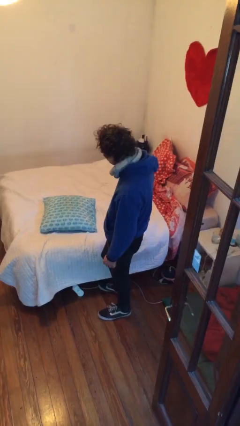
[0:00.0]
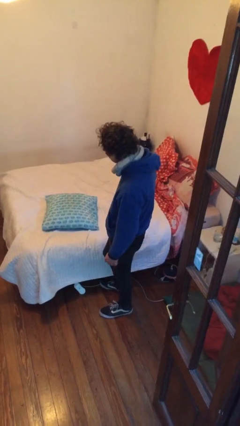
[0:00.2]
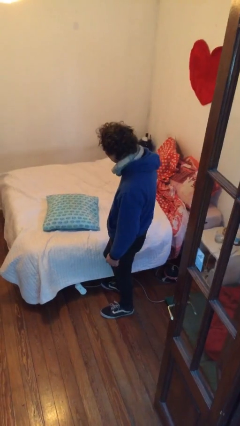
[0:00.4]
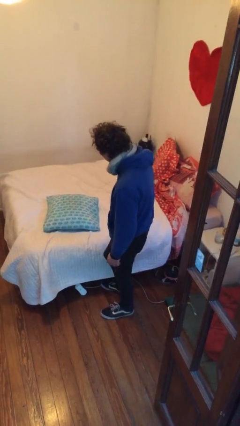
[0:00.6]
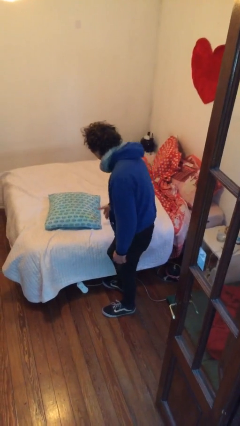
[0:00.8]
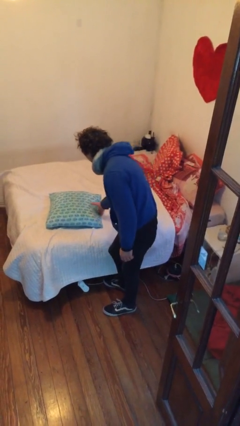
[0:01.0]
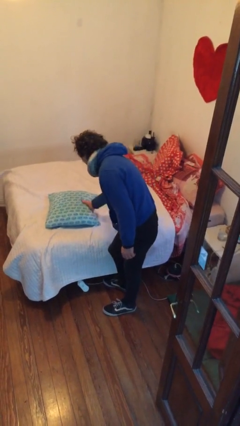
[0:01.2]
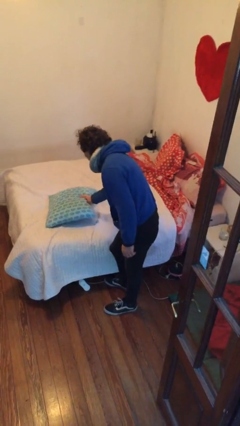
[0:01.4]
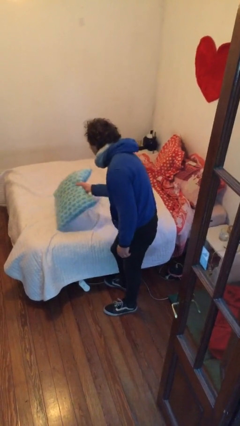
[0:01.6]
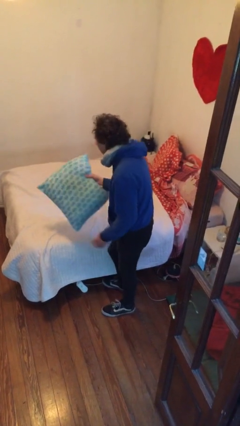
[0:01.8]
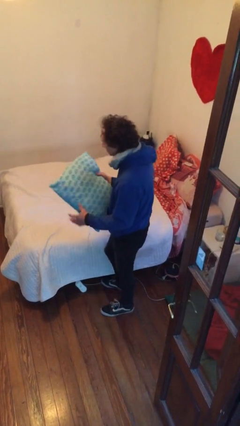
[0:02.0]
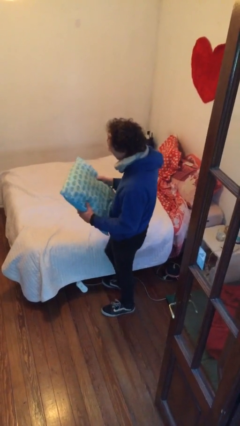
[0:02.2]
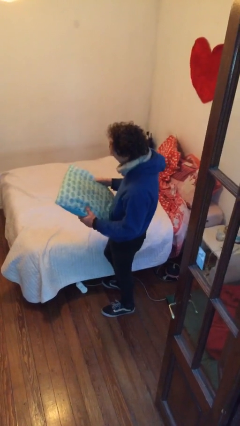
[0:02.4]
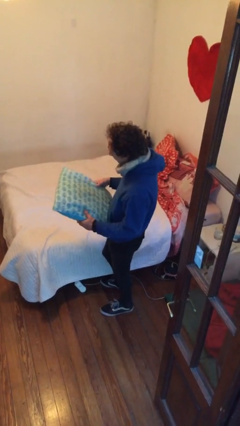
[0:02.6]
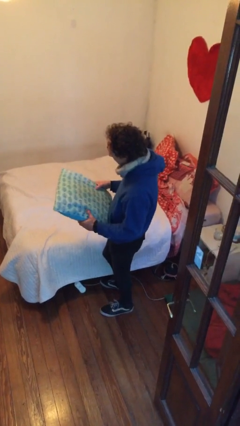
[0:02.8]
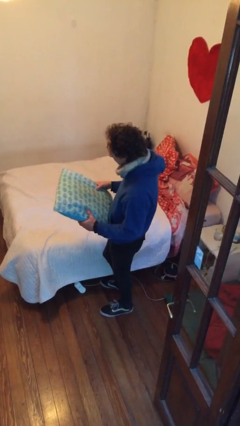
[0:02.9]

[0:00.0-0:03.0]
person picks up object from bed

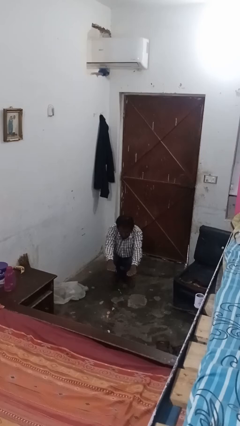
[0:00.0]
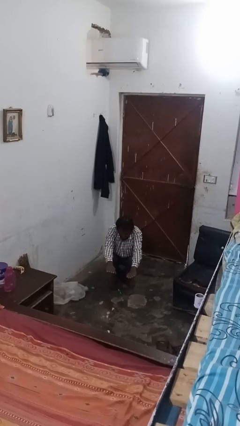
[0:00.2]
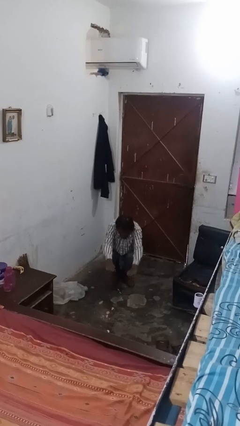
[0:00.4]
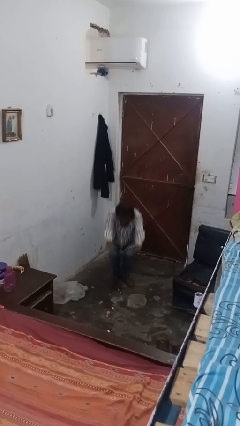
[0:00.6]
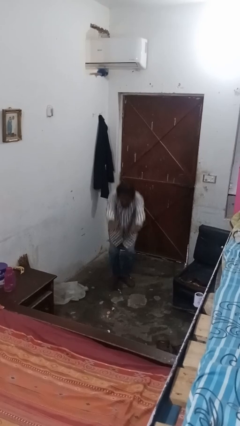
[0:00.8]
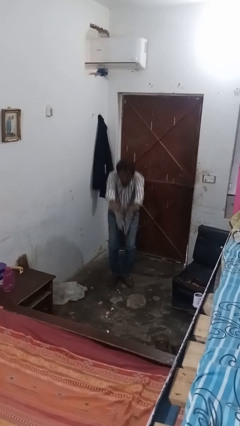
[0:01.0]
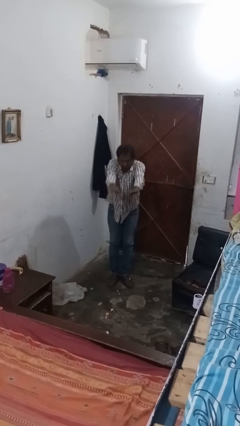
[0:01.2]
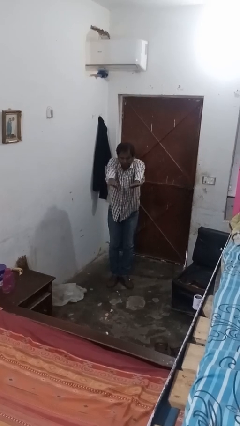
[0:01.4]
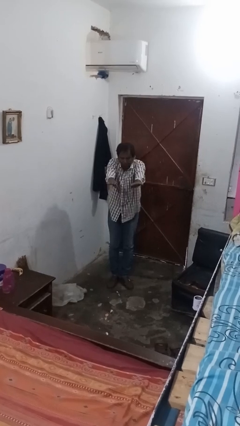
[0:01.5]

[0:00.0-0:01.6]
person stands up

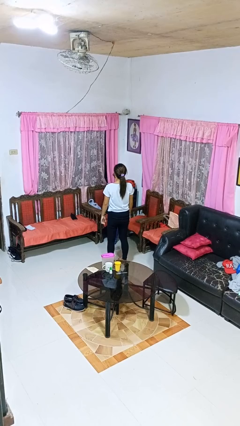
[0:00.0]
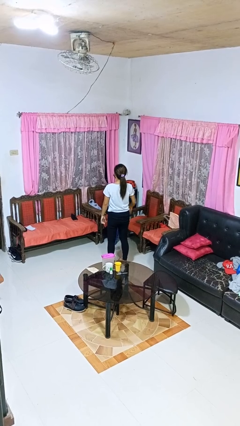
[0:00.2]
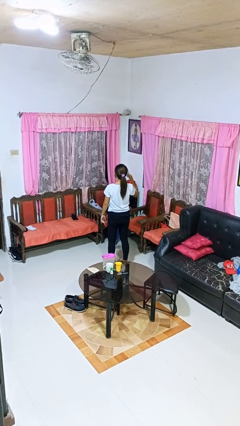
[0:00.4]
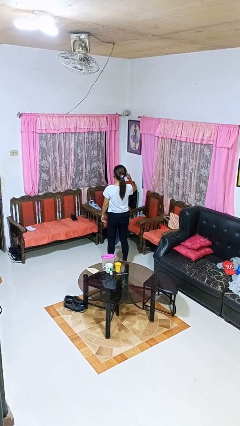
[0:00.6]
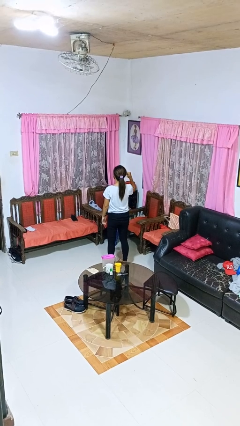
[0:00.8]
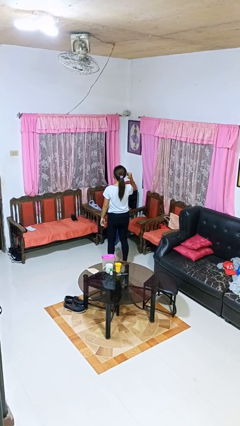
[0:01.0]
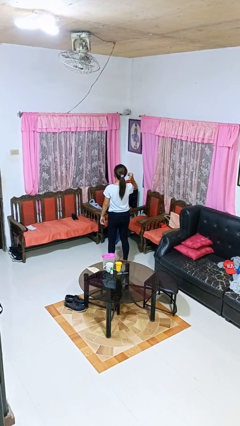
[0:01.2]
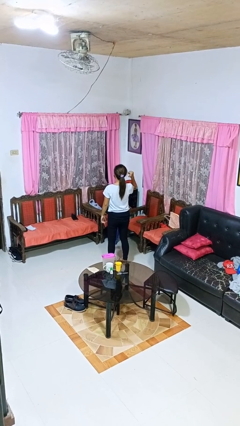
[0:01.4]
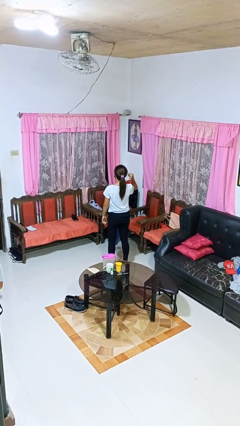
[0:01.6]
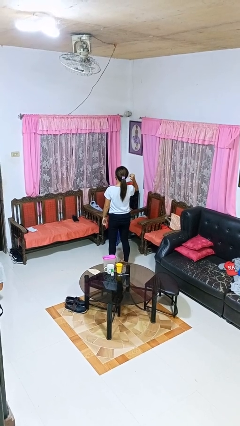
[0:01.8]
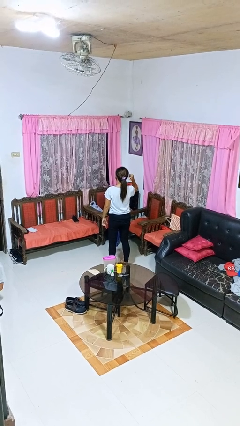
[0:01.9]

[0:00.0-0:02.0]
person gestures behind me

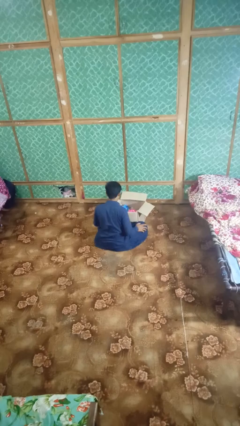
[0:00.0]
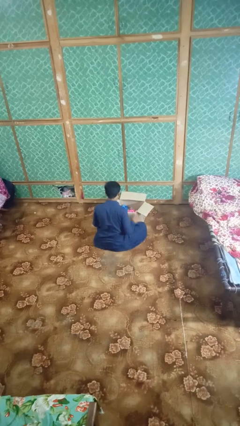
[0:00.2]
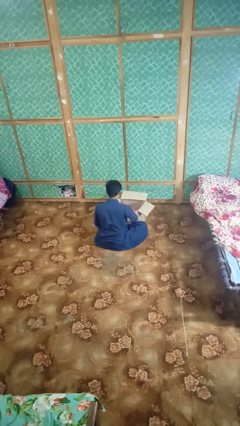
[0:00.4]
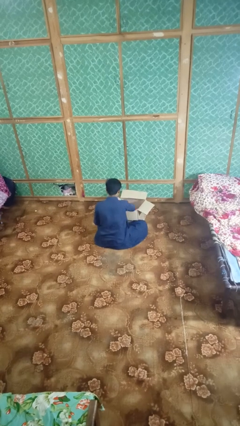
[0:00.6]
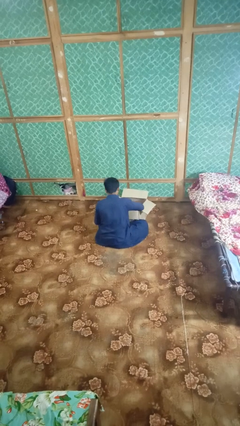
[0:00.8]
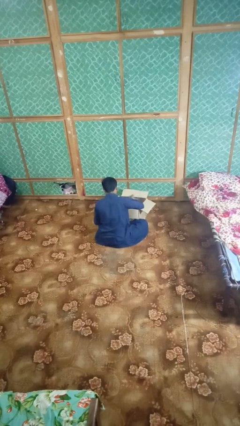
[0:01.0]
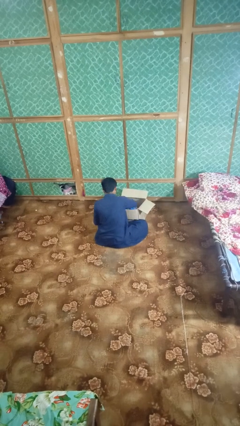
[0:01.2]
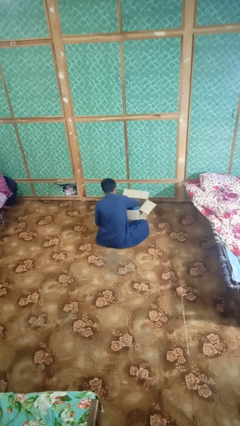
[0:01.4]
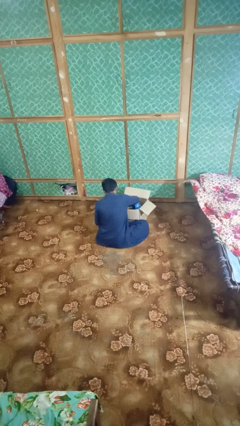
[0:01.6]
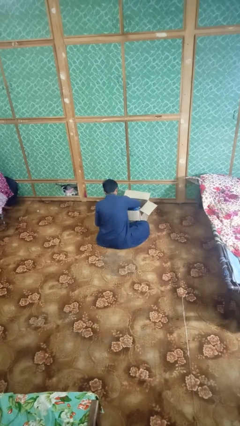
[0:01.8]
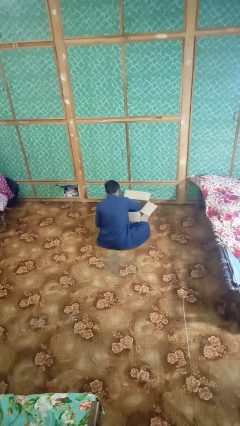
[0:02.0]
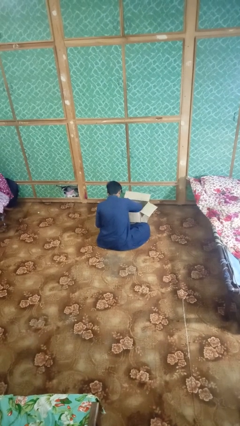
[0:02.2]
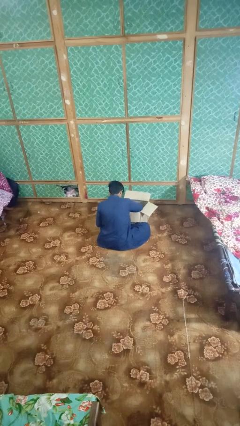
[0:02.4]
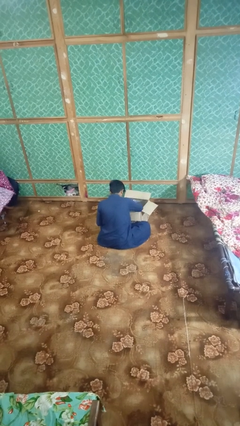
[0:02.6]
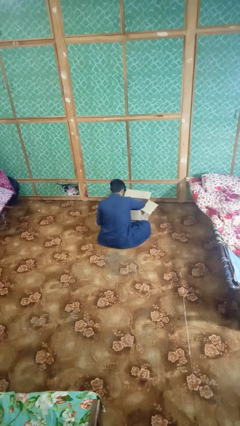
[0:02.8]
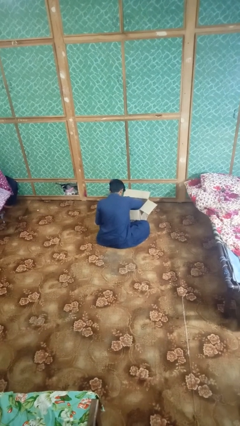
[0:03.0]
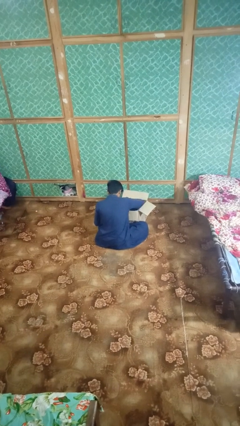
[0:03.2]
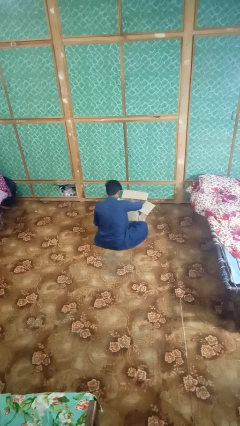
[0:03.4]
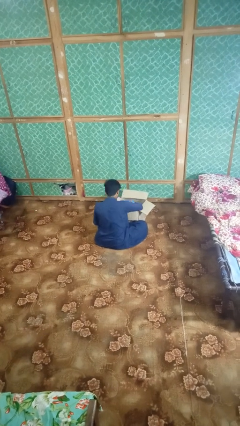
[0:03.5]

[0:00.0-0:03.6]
person searches in box

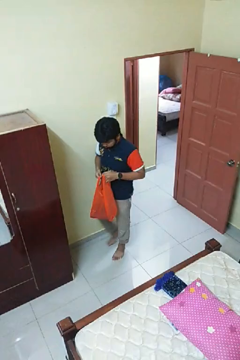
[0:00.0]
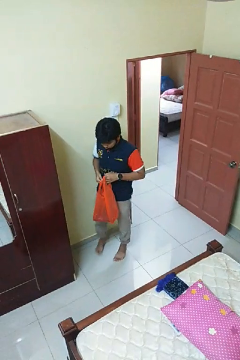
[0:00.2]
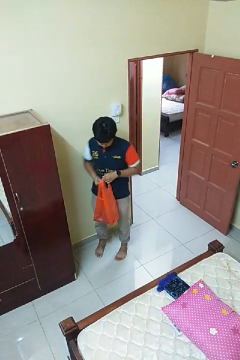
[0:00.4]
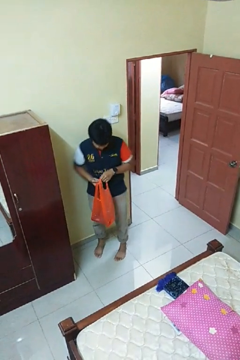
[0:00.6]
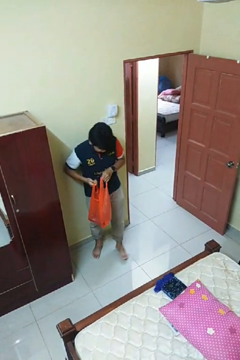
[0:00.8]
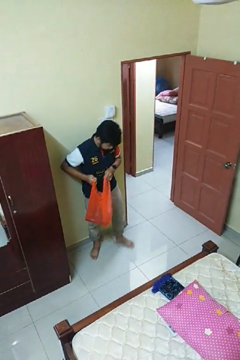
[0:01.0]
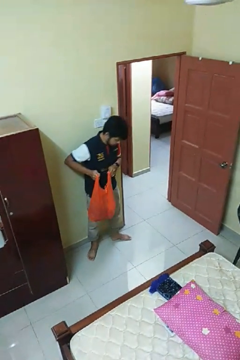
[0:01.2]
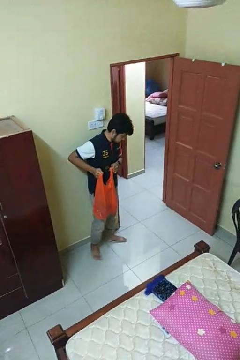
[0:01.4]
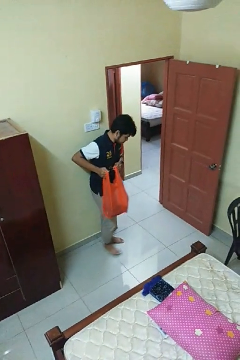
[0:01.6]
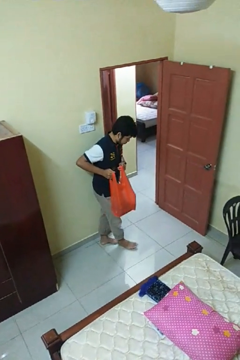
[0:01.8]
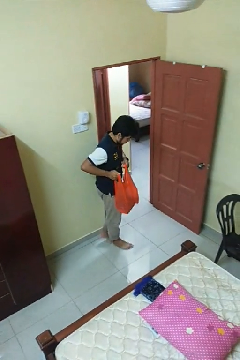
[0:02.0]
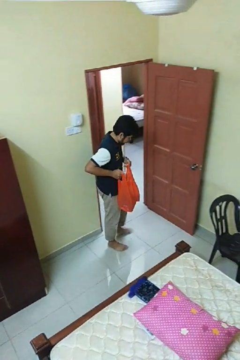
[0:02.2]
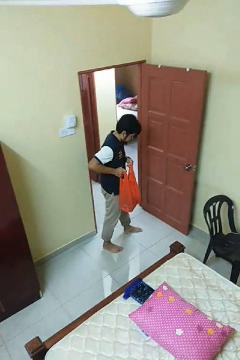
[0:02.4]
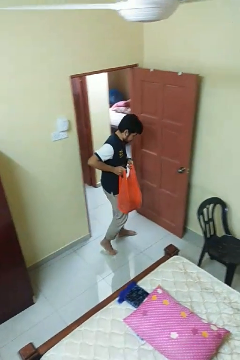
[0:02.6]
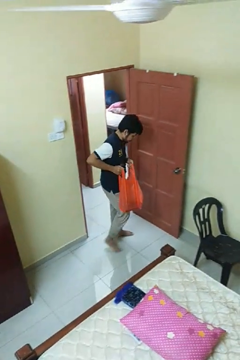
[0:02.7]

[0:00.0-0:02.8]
person carries groceries

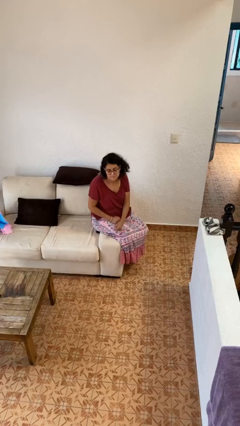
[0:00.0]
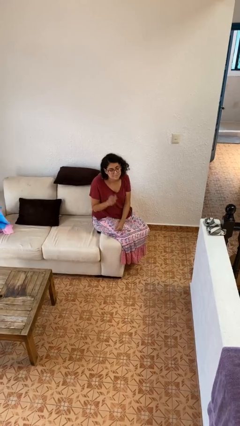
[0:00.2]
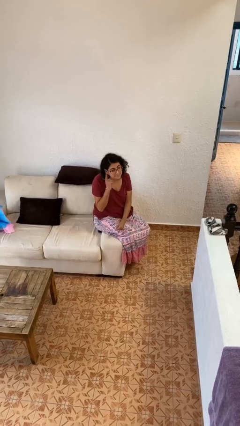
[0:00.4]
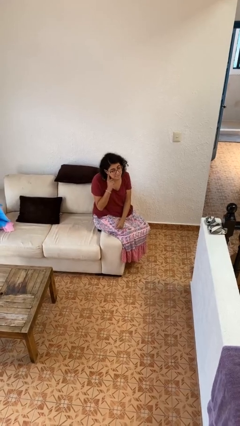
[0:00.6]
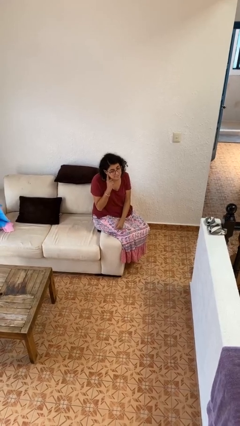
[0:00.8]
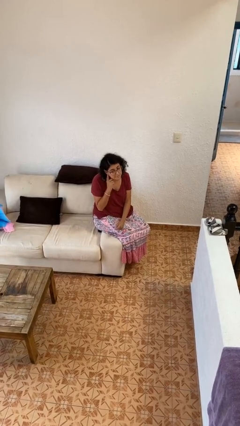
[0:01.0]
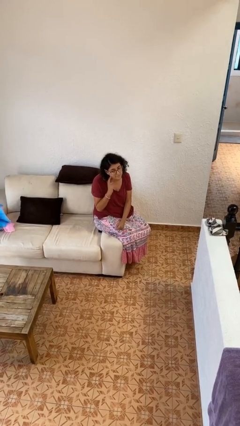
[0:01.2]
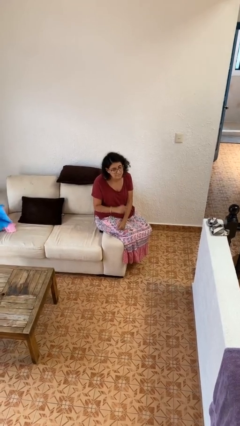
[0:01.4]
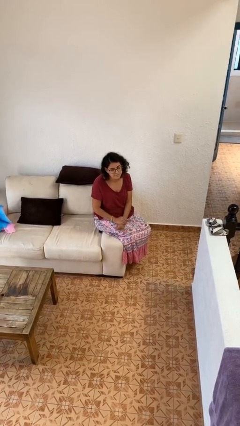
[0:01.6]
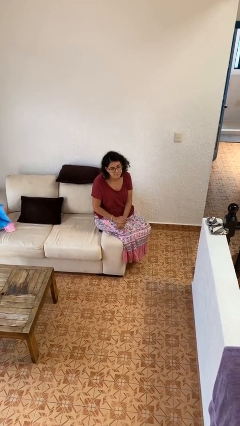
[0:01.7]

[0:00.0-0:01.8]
person gestures listen closely

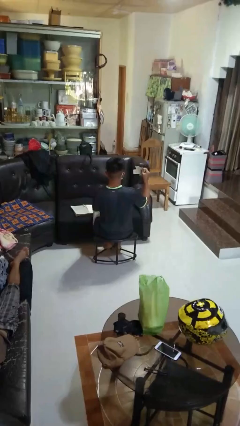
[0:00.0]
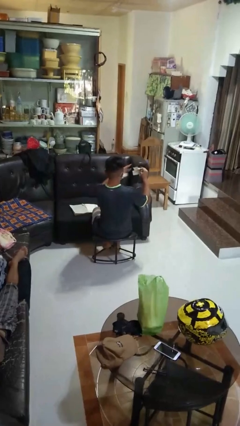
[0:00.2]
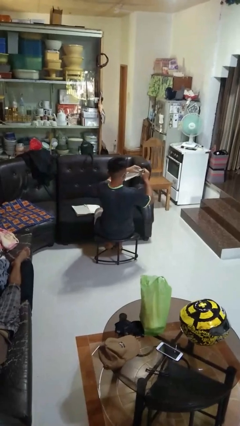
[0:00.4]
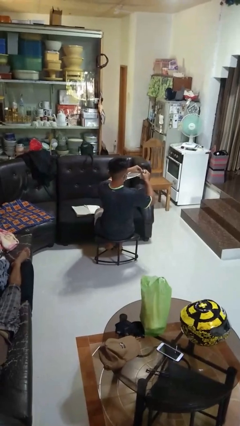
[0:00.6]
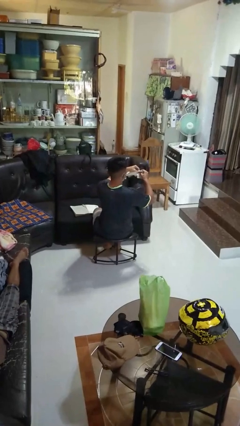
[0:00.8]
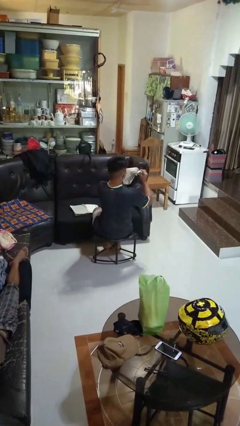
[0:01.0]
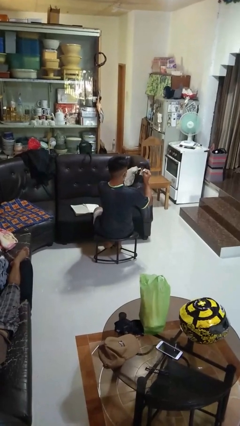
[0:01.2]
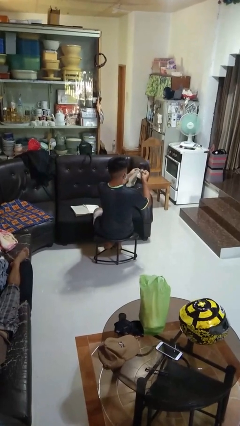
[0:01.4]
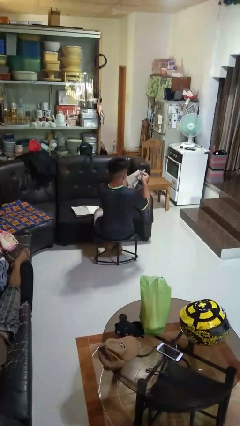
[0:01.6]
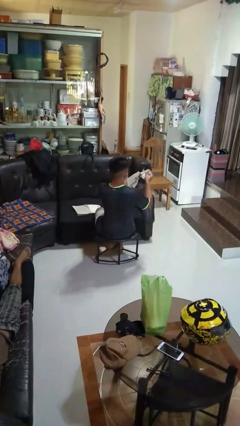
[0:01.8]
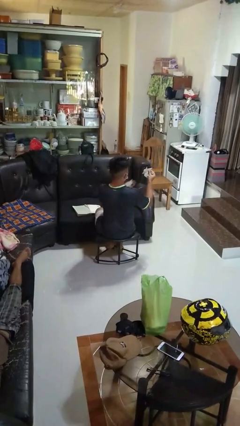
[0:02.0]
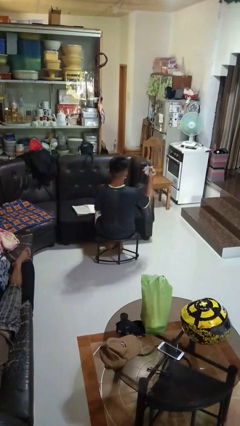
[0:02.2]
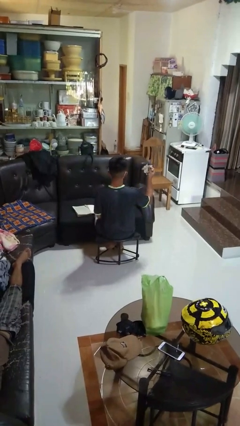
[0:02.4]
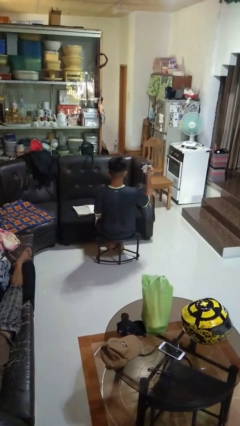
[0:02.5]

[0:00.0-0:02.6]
person tears paper
